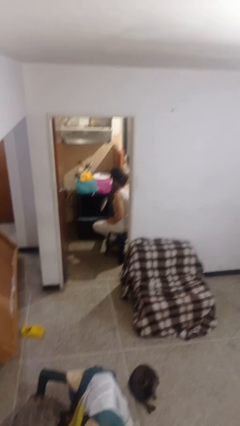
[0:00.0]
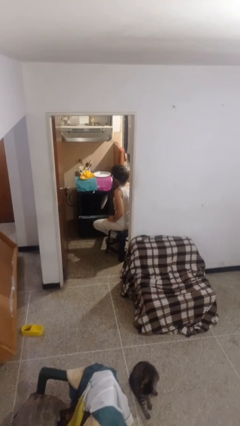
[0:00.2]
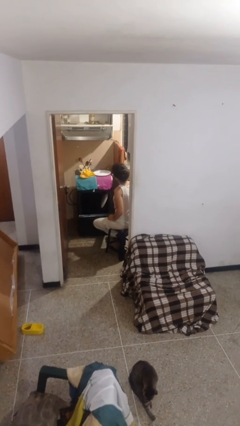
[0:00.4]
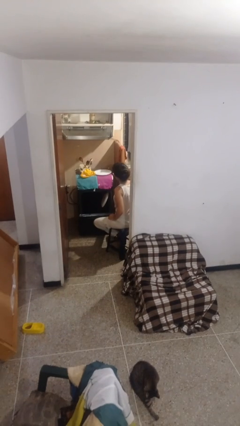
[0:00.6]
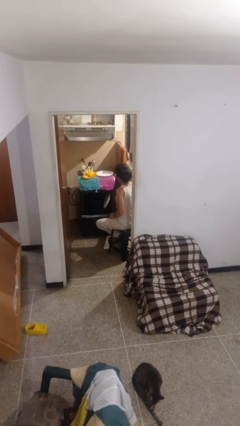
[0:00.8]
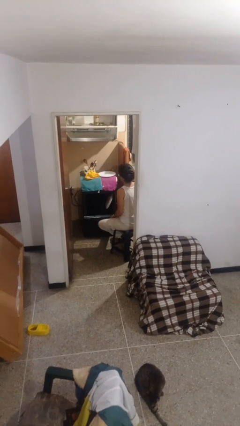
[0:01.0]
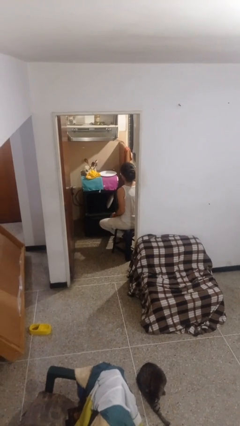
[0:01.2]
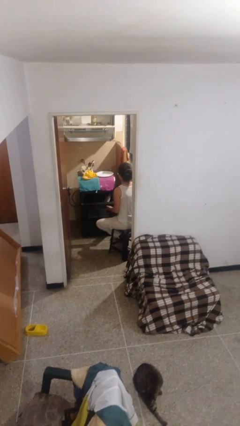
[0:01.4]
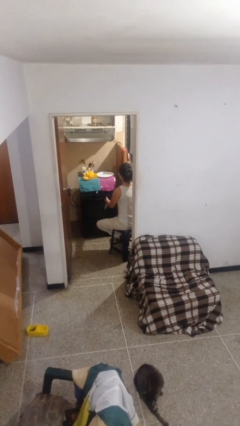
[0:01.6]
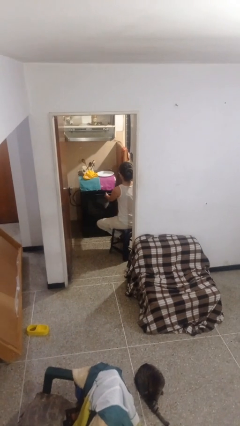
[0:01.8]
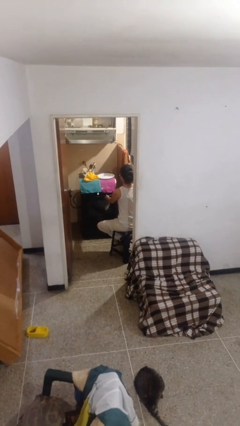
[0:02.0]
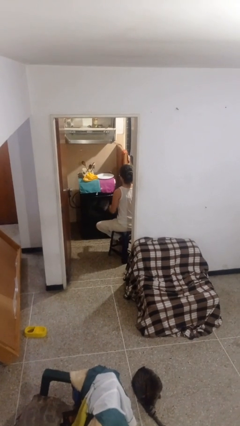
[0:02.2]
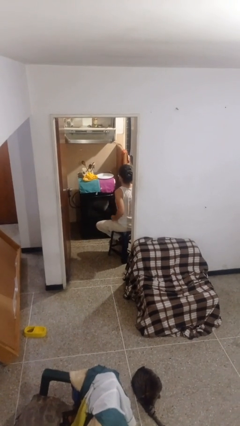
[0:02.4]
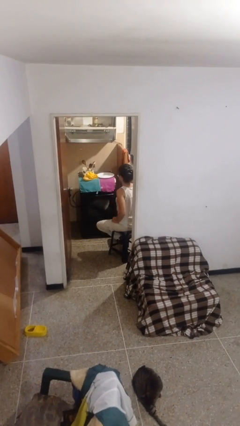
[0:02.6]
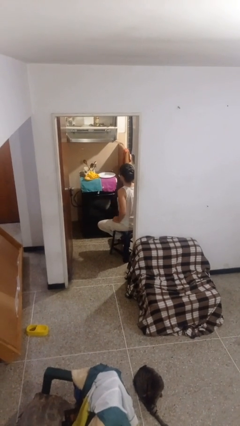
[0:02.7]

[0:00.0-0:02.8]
person closes dishwasher

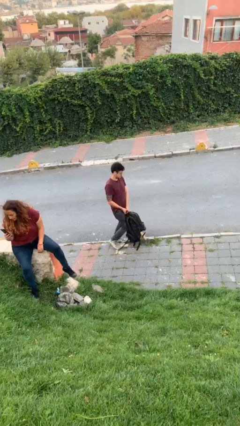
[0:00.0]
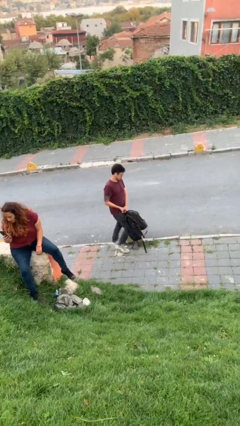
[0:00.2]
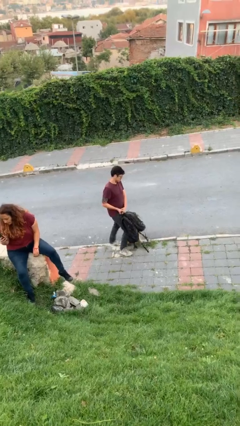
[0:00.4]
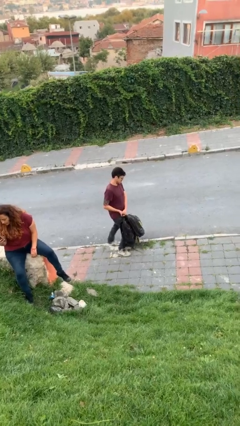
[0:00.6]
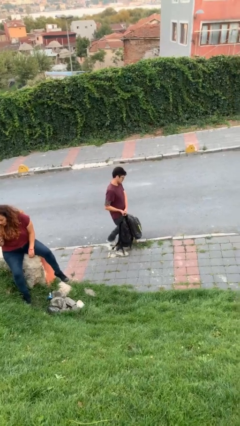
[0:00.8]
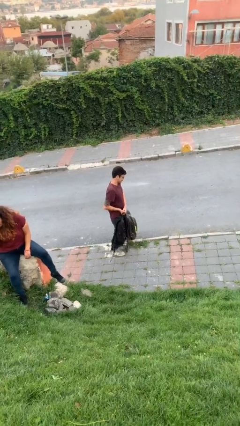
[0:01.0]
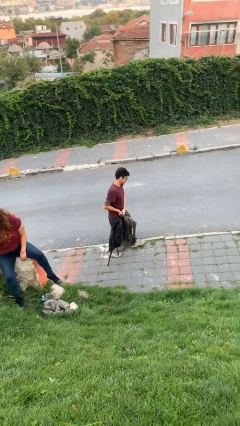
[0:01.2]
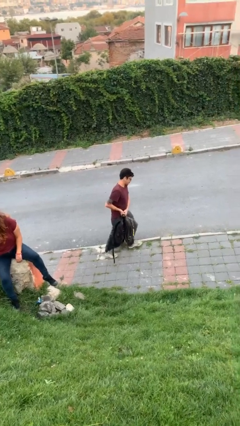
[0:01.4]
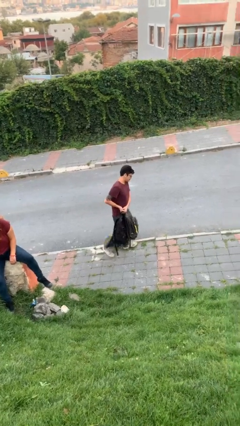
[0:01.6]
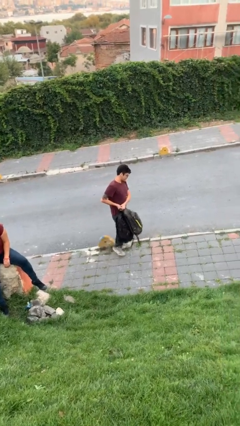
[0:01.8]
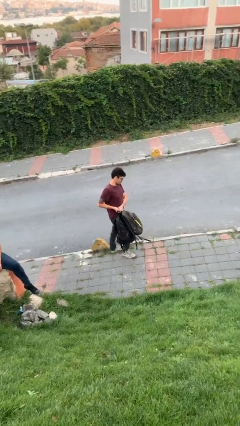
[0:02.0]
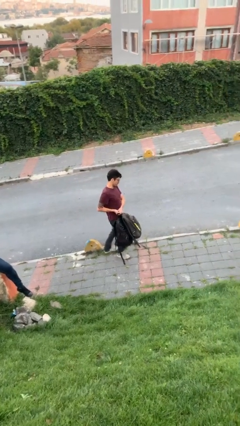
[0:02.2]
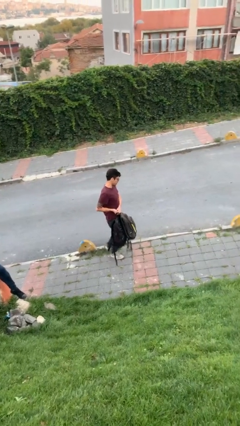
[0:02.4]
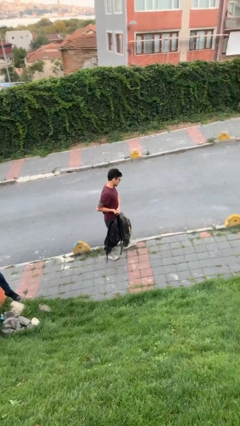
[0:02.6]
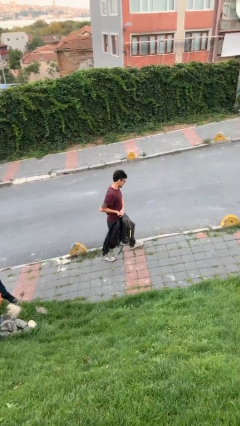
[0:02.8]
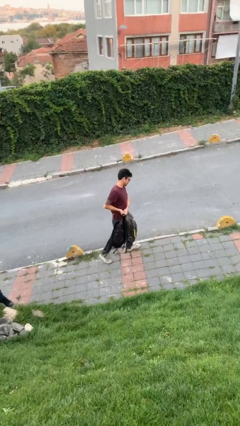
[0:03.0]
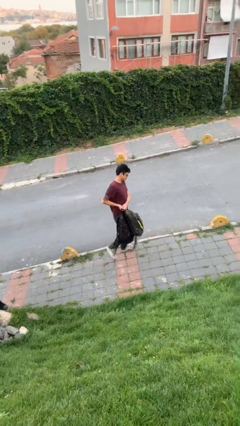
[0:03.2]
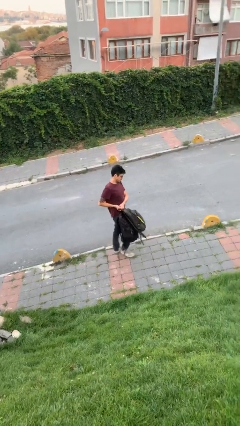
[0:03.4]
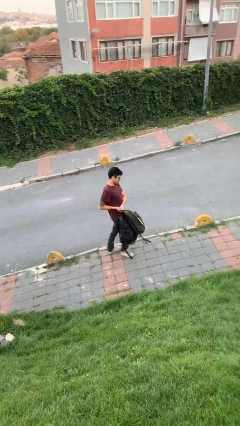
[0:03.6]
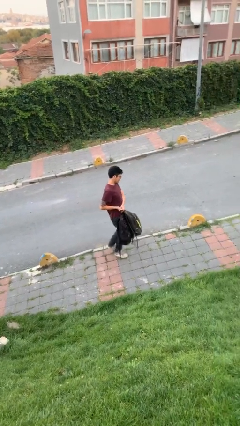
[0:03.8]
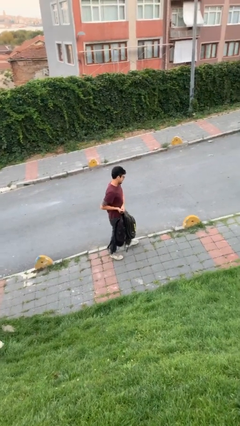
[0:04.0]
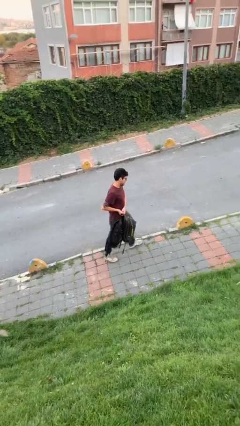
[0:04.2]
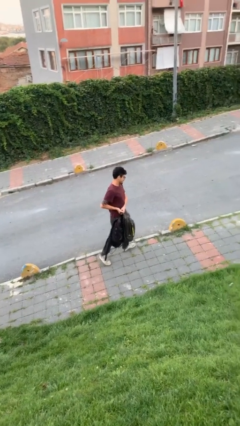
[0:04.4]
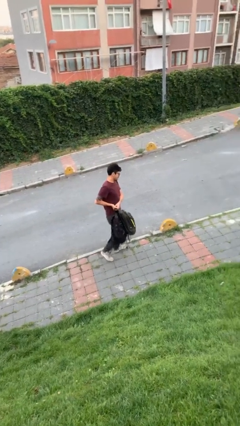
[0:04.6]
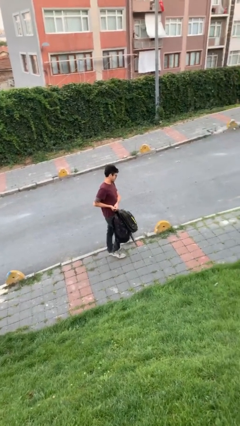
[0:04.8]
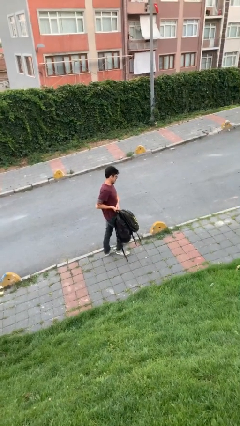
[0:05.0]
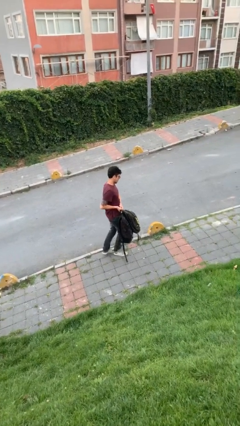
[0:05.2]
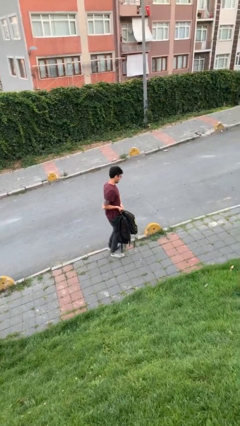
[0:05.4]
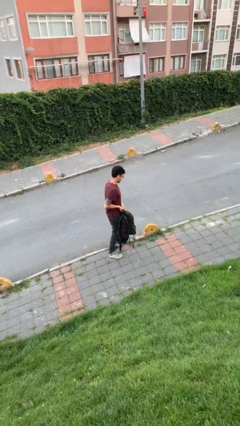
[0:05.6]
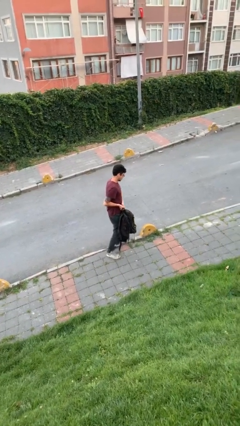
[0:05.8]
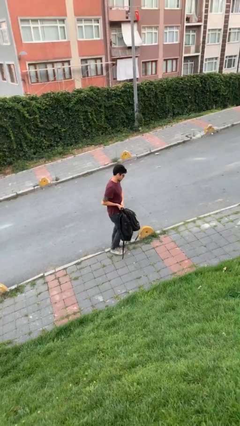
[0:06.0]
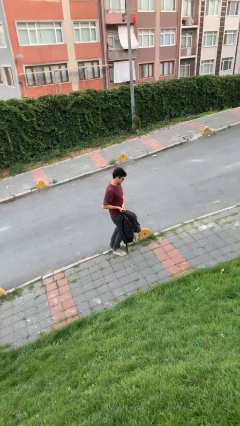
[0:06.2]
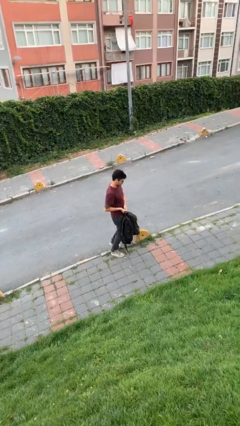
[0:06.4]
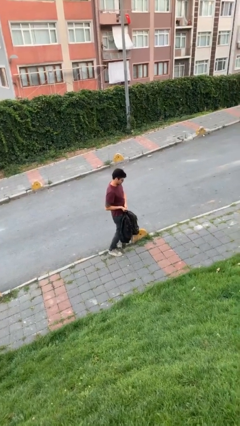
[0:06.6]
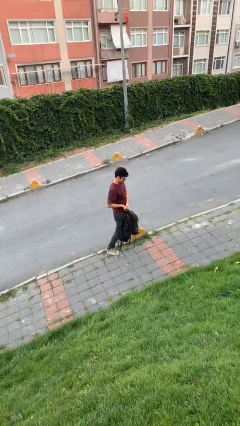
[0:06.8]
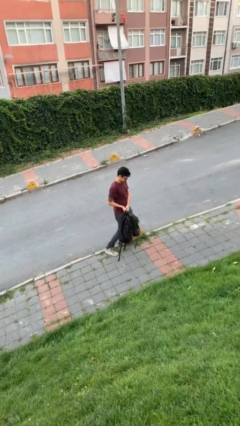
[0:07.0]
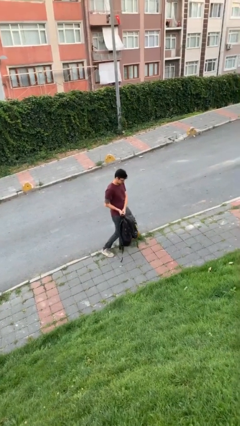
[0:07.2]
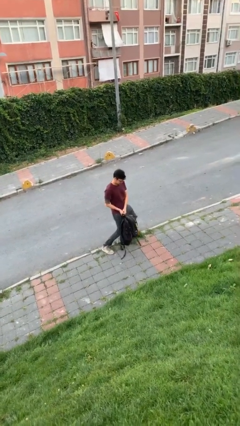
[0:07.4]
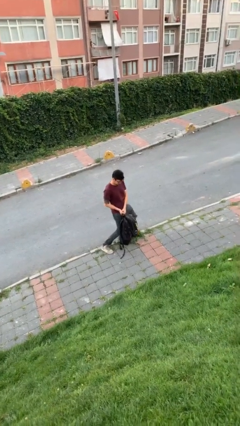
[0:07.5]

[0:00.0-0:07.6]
person carries heavy object

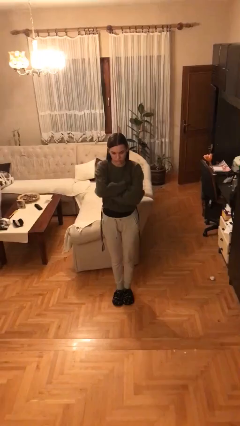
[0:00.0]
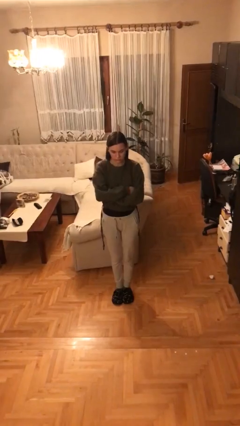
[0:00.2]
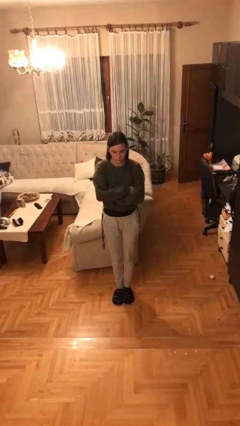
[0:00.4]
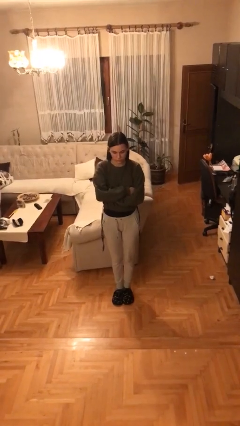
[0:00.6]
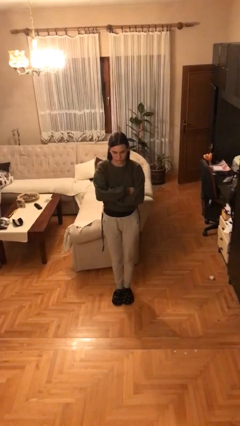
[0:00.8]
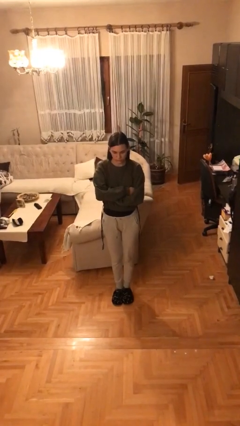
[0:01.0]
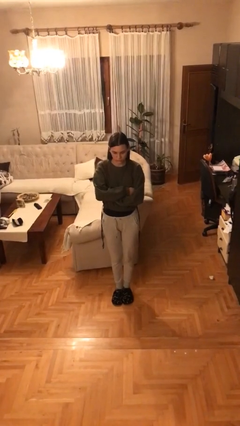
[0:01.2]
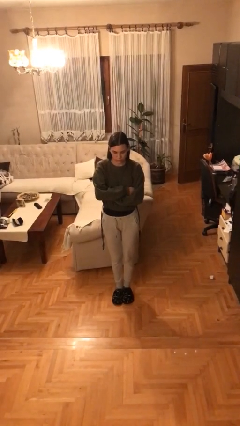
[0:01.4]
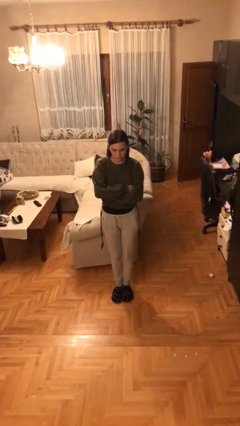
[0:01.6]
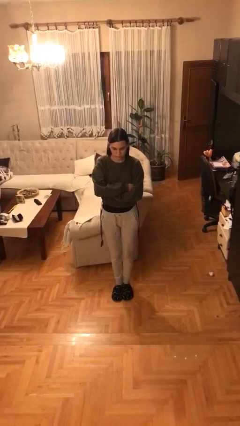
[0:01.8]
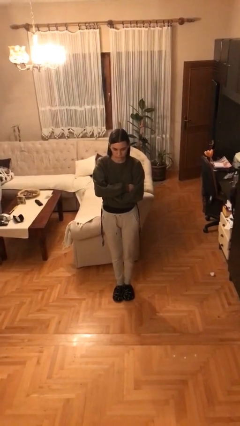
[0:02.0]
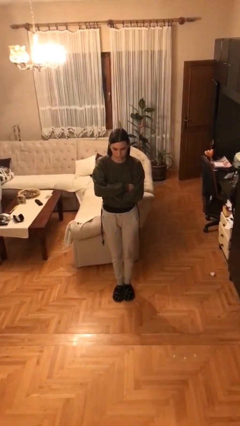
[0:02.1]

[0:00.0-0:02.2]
person crosses arms

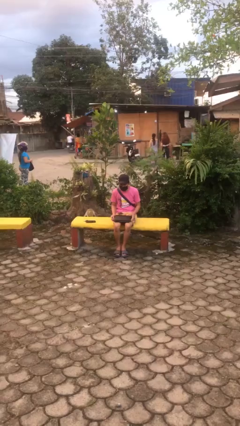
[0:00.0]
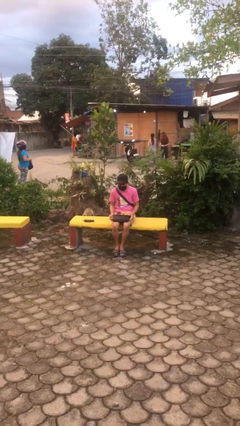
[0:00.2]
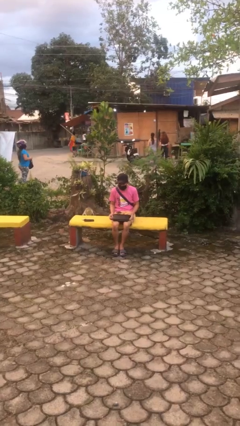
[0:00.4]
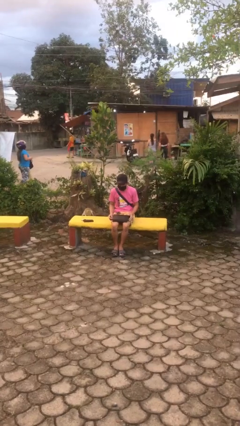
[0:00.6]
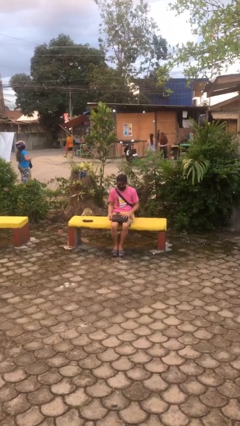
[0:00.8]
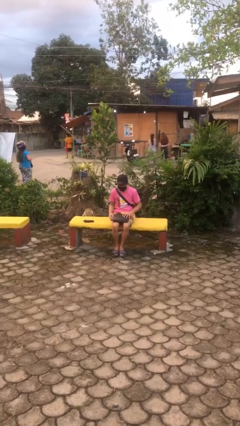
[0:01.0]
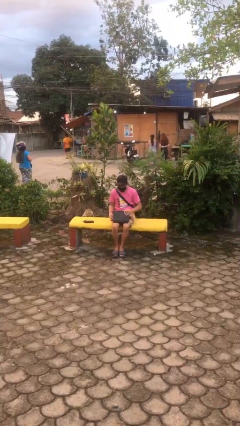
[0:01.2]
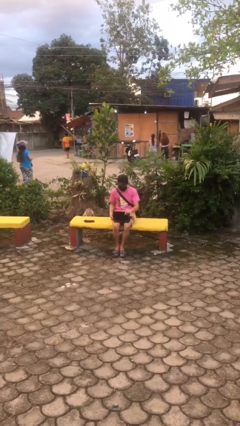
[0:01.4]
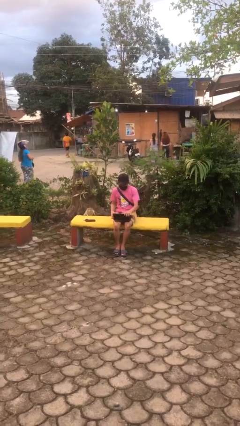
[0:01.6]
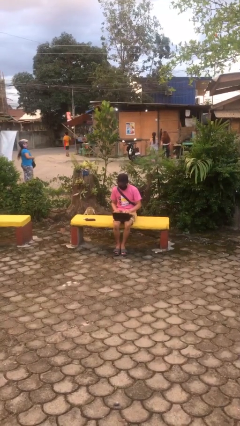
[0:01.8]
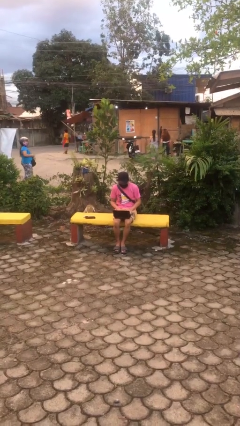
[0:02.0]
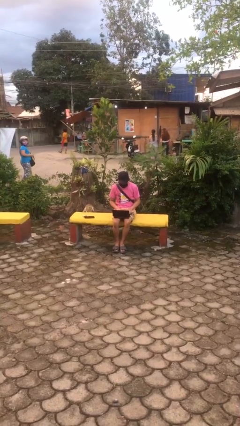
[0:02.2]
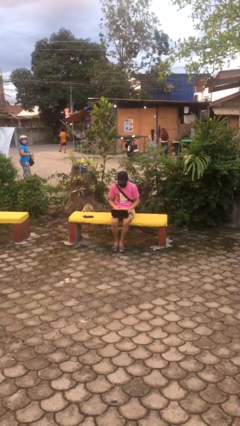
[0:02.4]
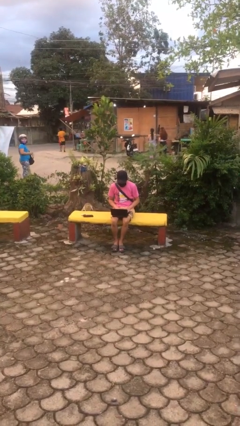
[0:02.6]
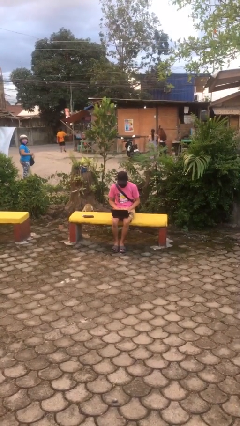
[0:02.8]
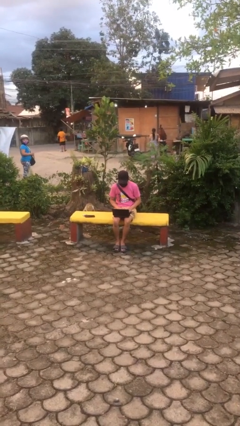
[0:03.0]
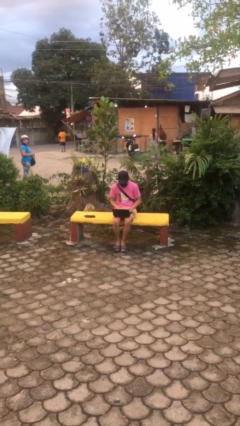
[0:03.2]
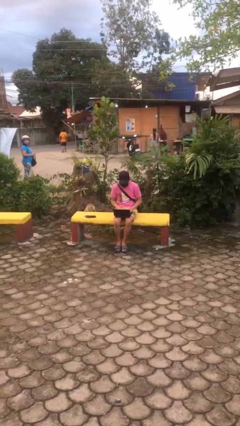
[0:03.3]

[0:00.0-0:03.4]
person interacts with laptop

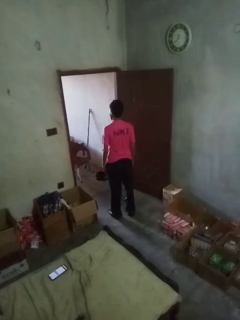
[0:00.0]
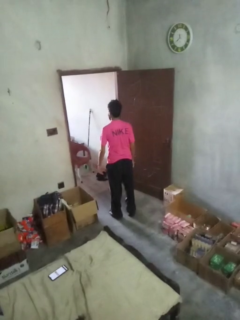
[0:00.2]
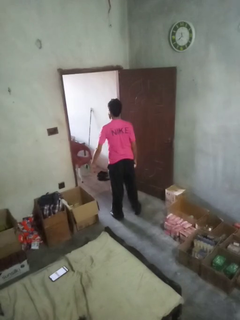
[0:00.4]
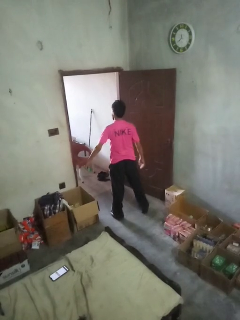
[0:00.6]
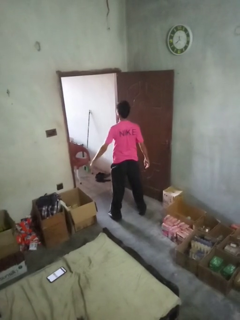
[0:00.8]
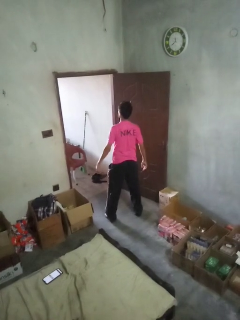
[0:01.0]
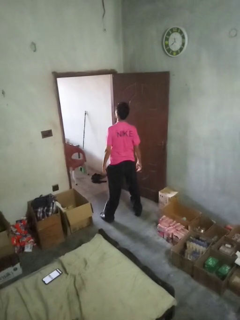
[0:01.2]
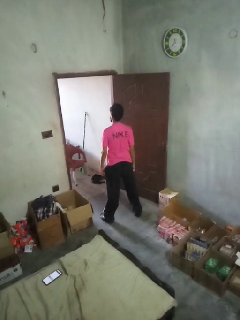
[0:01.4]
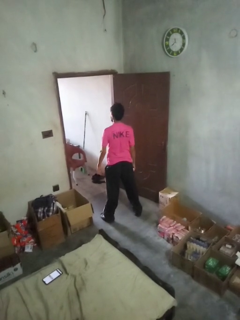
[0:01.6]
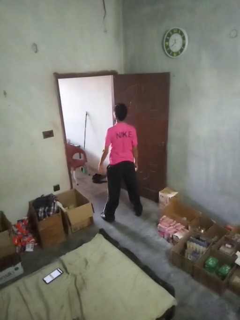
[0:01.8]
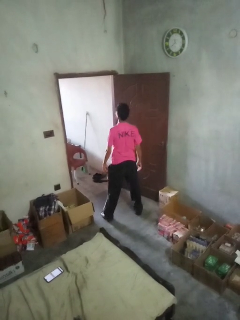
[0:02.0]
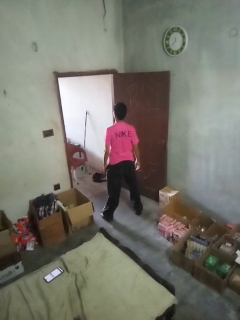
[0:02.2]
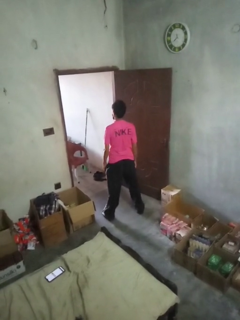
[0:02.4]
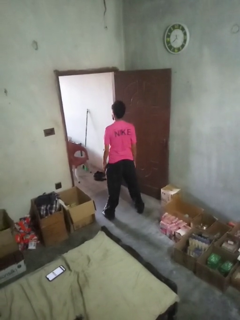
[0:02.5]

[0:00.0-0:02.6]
person stretches back
